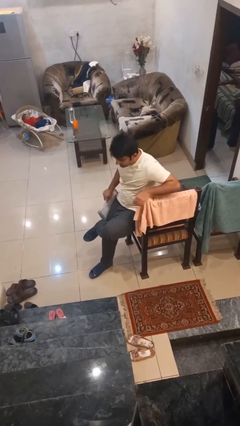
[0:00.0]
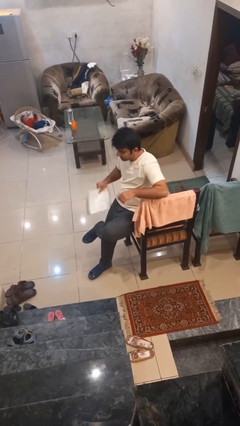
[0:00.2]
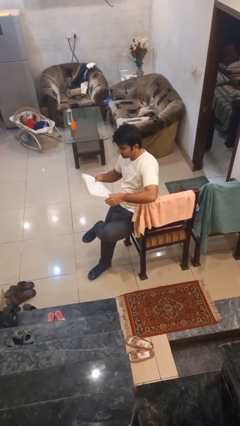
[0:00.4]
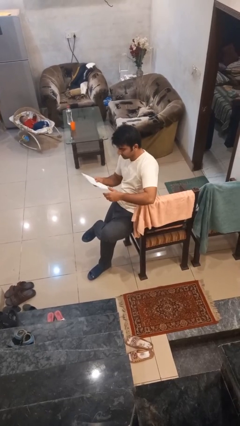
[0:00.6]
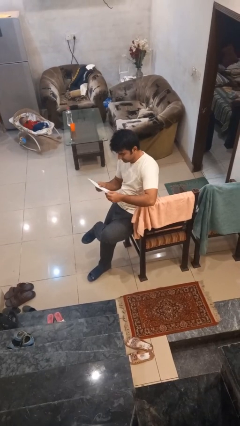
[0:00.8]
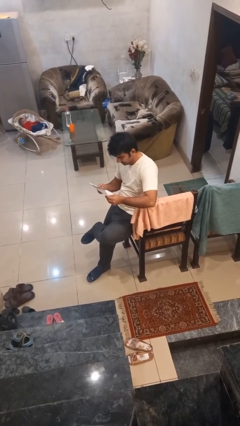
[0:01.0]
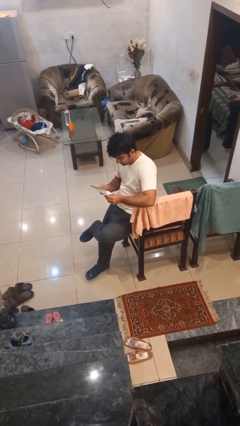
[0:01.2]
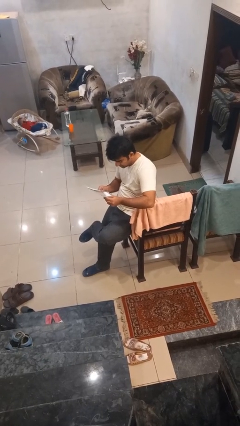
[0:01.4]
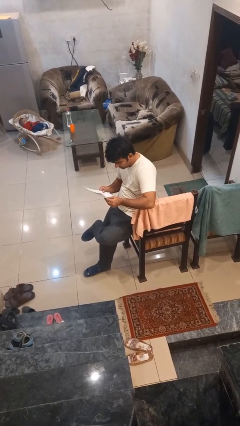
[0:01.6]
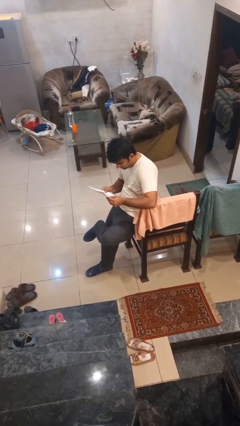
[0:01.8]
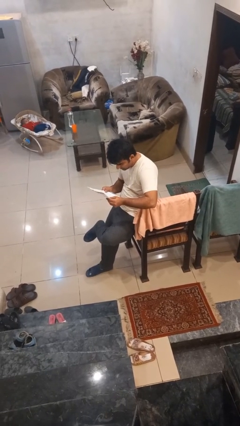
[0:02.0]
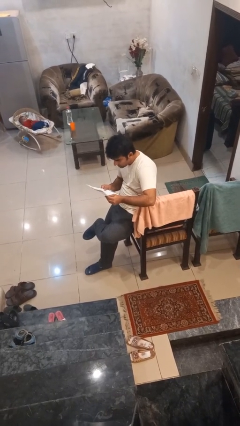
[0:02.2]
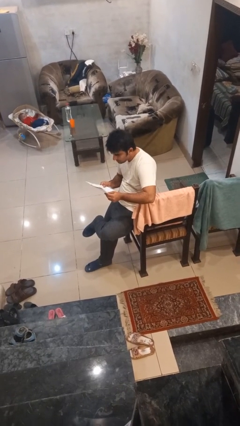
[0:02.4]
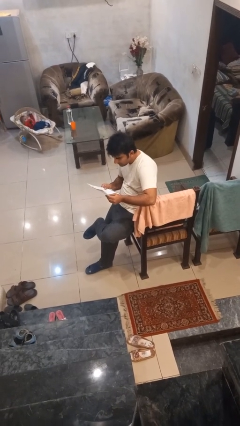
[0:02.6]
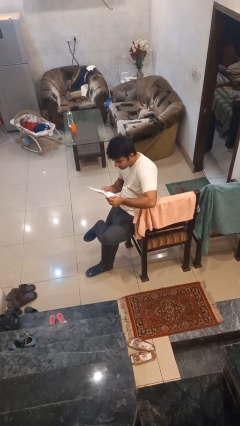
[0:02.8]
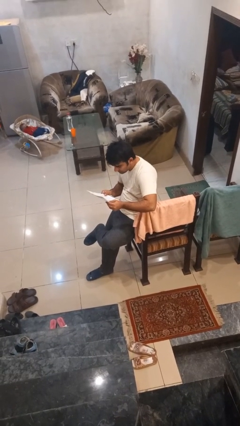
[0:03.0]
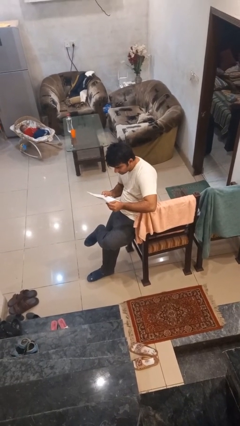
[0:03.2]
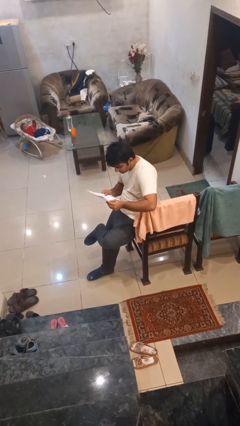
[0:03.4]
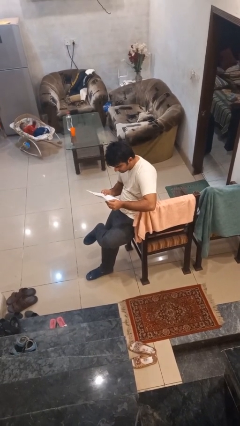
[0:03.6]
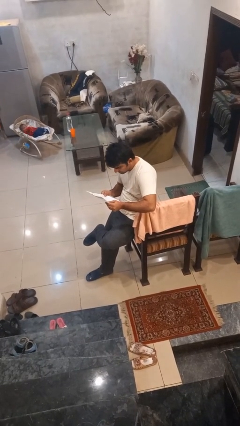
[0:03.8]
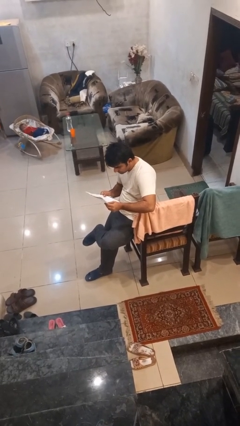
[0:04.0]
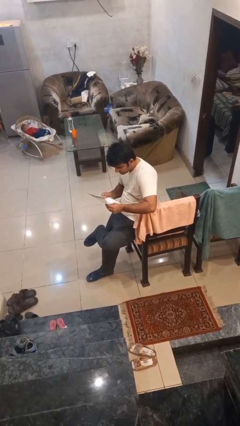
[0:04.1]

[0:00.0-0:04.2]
person reads document

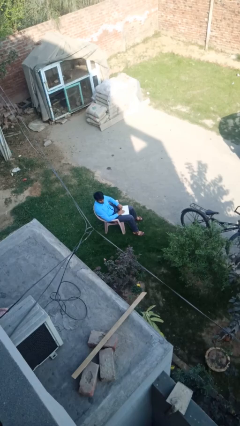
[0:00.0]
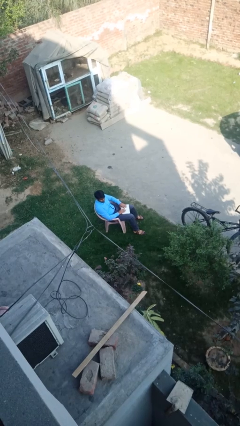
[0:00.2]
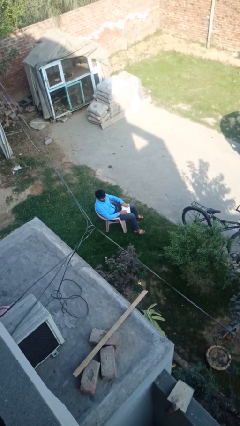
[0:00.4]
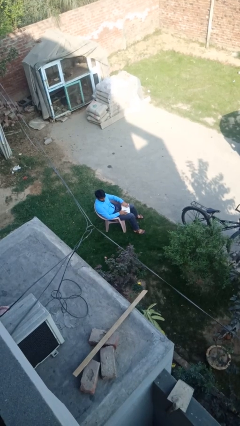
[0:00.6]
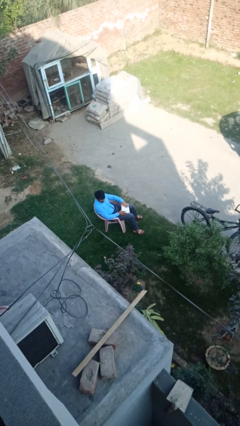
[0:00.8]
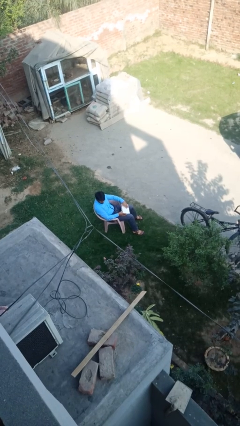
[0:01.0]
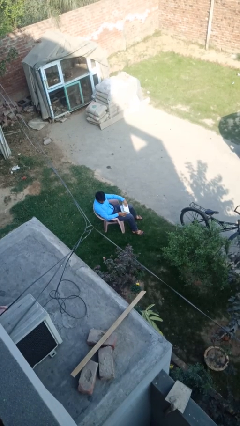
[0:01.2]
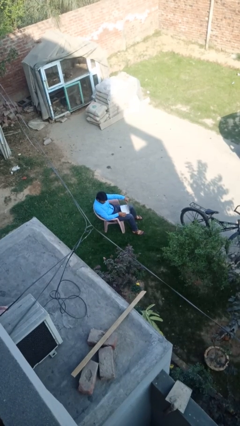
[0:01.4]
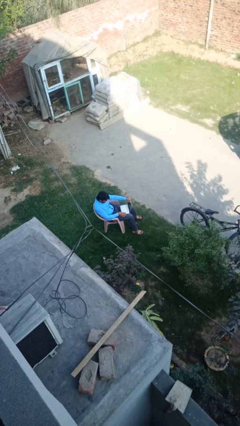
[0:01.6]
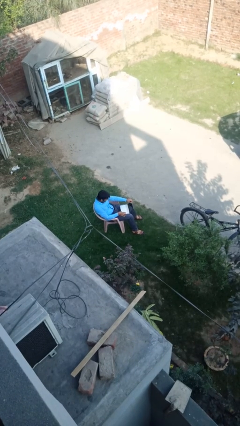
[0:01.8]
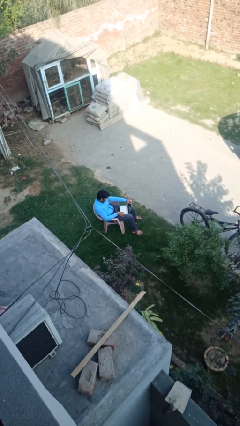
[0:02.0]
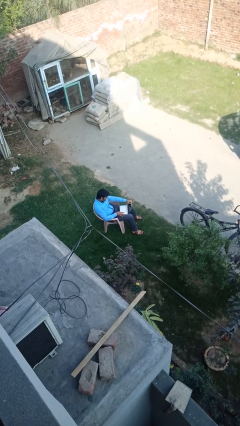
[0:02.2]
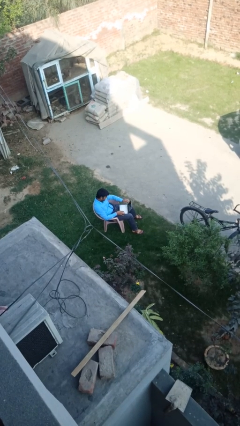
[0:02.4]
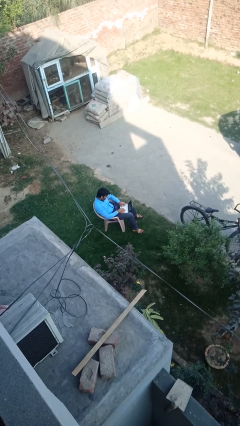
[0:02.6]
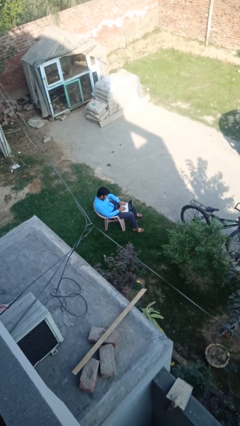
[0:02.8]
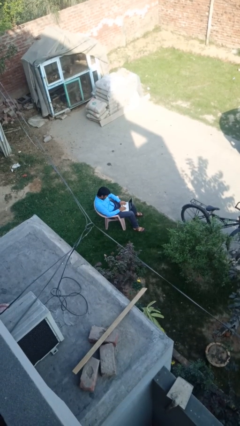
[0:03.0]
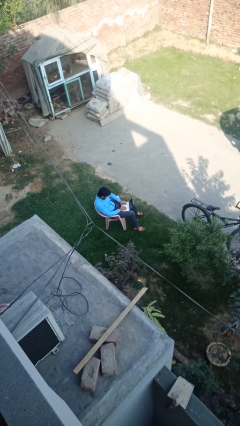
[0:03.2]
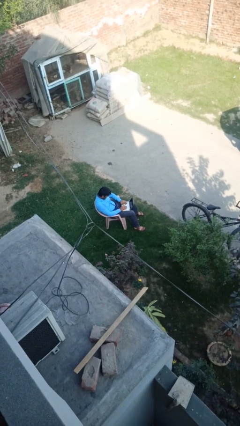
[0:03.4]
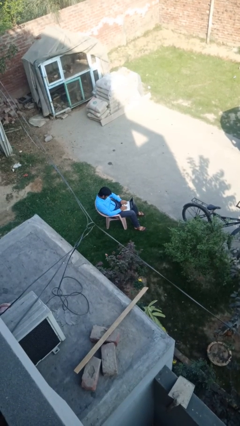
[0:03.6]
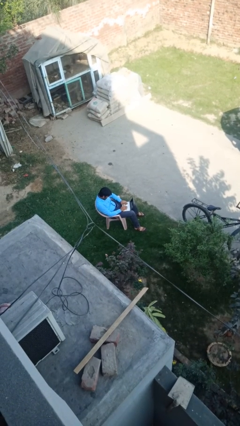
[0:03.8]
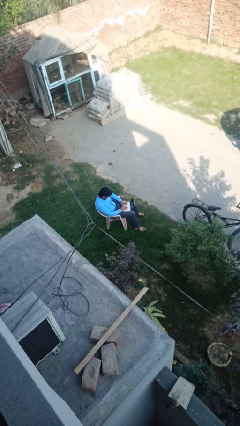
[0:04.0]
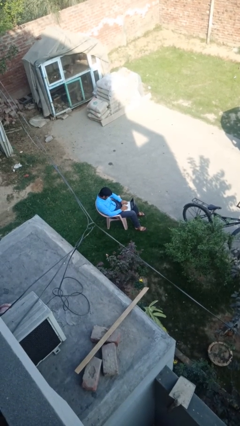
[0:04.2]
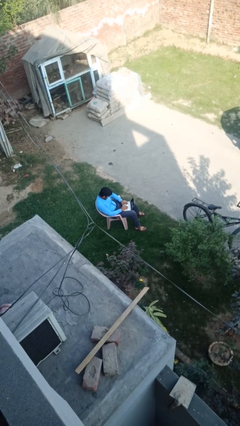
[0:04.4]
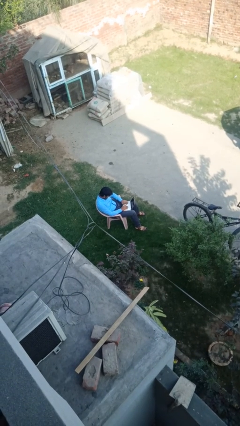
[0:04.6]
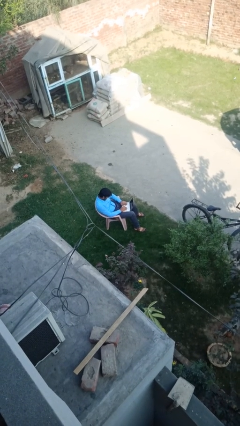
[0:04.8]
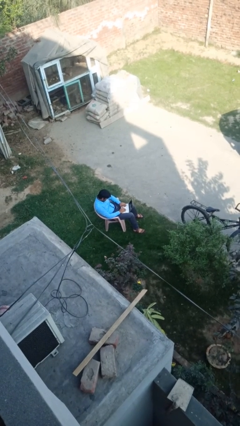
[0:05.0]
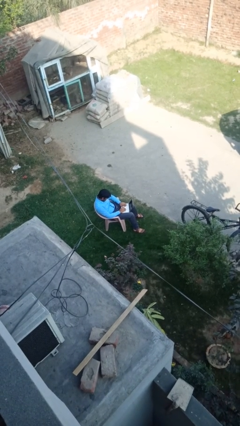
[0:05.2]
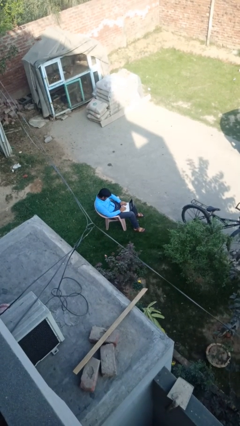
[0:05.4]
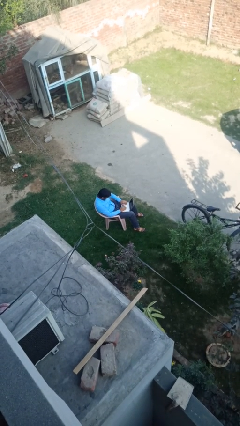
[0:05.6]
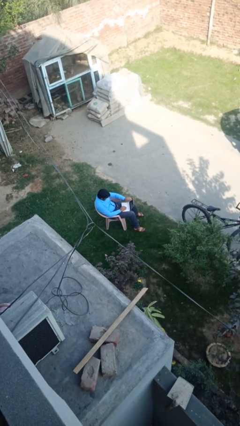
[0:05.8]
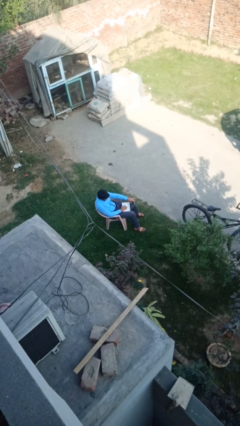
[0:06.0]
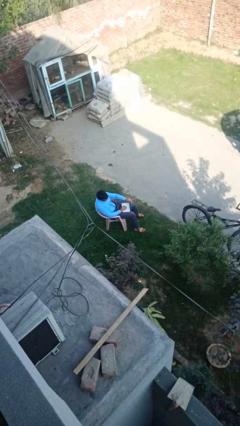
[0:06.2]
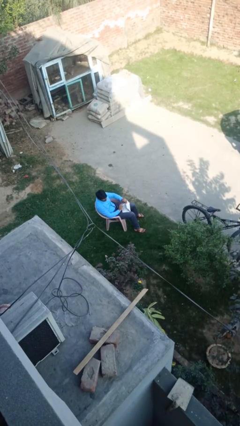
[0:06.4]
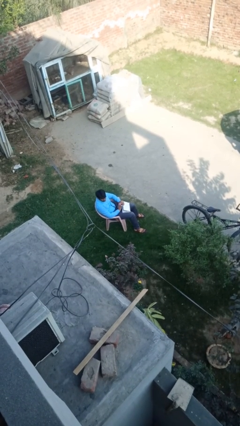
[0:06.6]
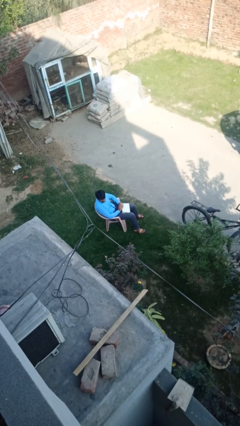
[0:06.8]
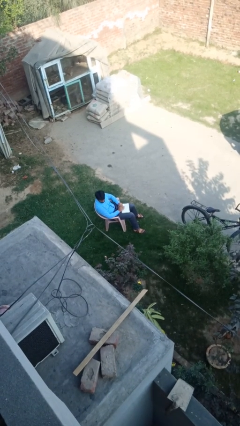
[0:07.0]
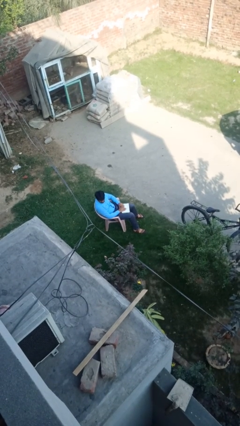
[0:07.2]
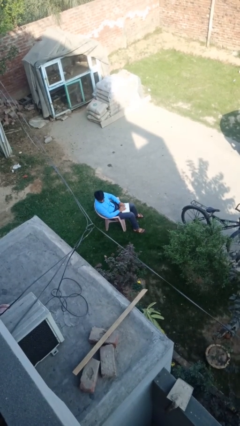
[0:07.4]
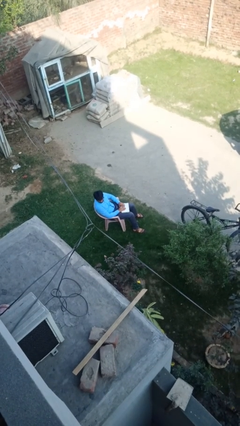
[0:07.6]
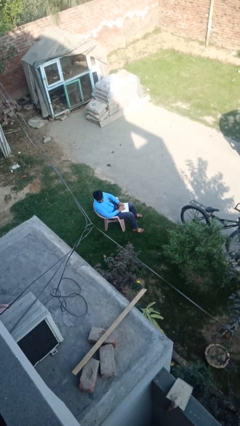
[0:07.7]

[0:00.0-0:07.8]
person interacts with laptop

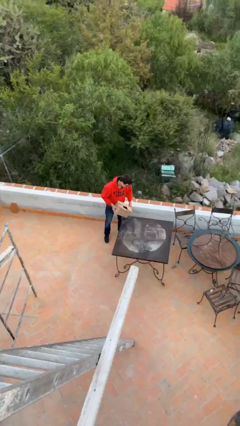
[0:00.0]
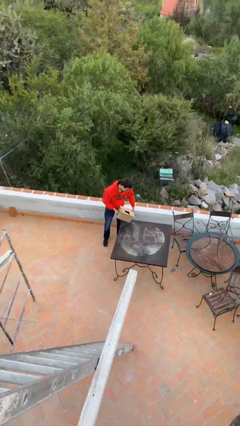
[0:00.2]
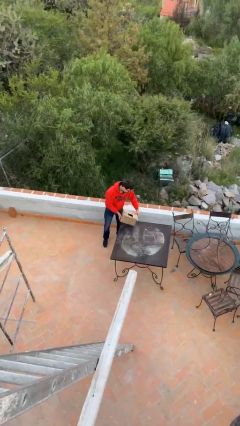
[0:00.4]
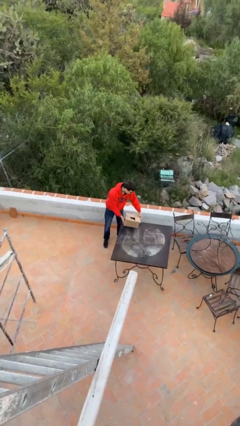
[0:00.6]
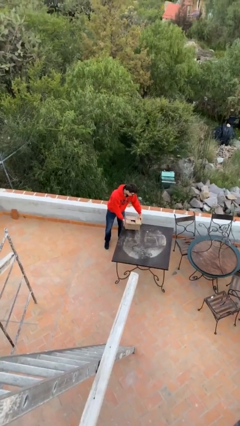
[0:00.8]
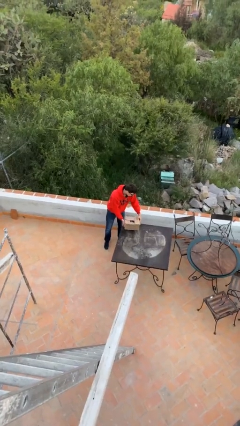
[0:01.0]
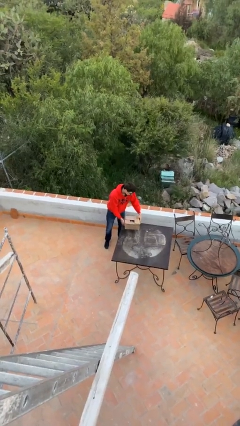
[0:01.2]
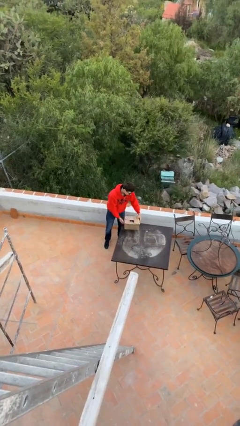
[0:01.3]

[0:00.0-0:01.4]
person puts down object on table

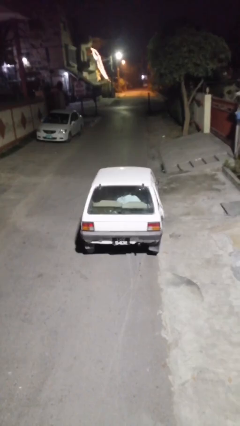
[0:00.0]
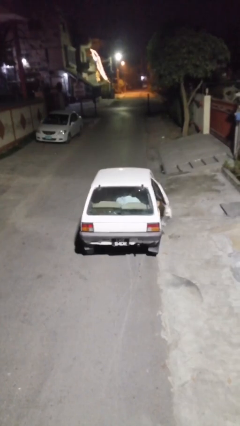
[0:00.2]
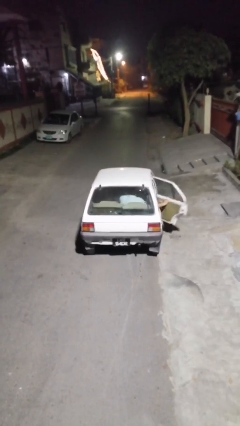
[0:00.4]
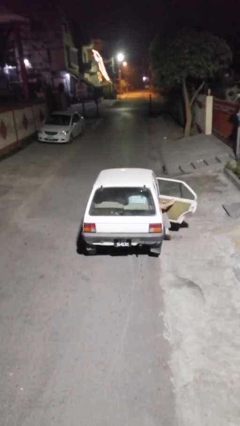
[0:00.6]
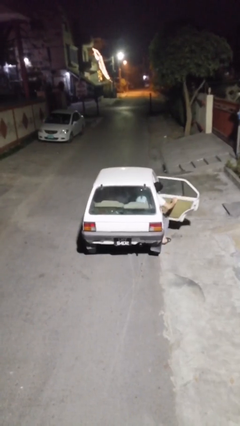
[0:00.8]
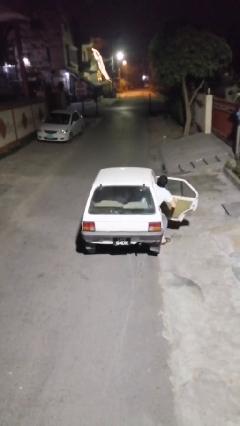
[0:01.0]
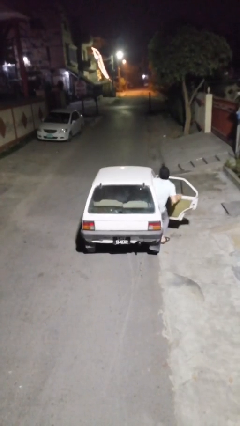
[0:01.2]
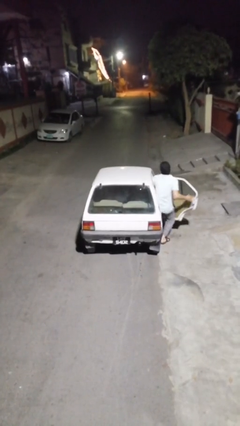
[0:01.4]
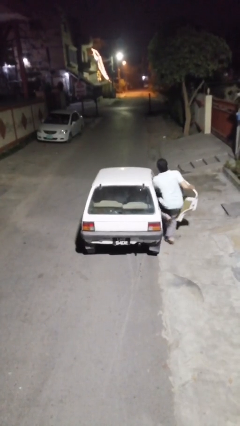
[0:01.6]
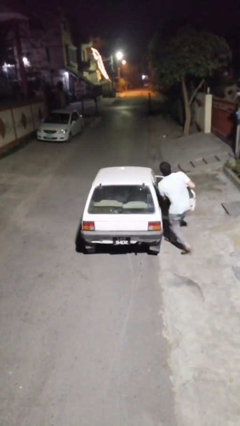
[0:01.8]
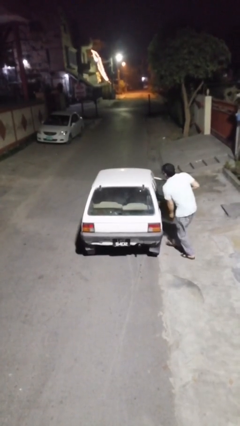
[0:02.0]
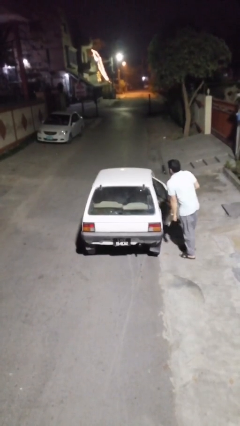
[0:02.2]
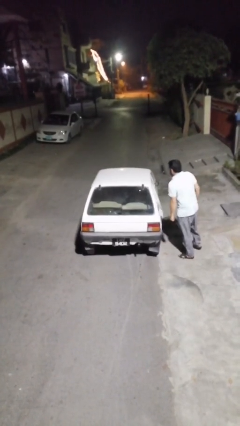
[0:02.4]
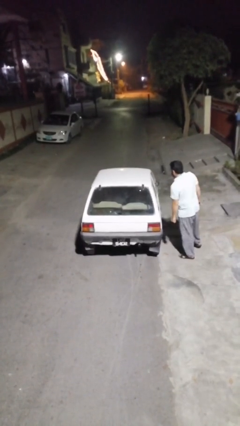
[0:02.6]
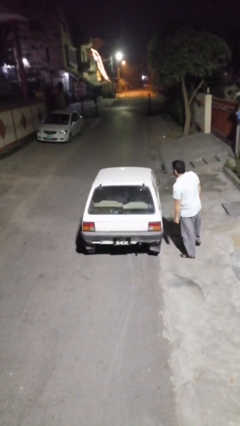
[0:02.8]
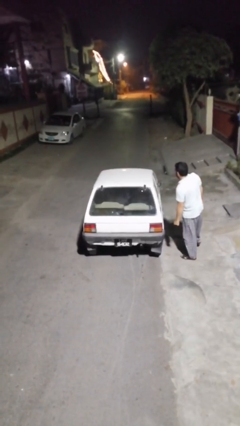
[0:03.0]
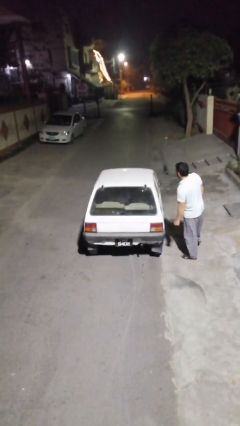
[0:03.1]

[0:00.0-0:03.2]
car drops off person

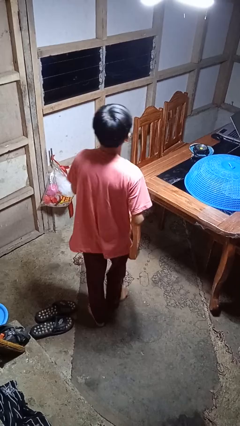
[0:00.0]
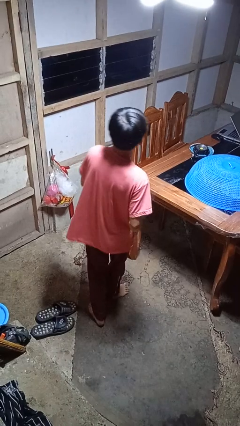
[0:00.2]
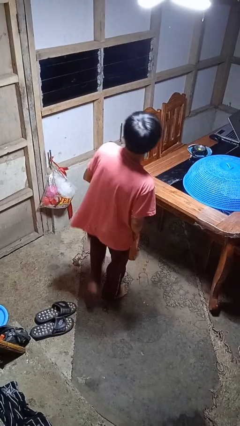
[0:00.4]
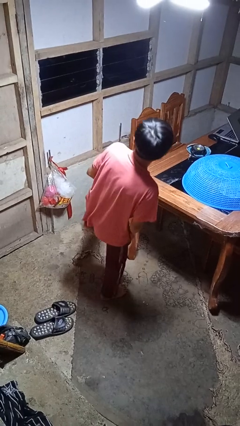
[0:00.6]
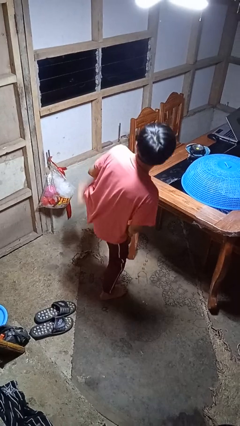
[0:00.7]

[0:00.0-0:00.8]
person karate kicks
